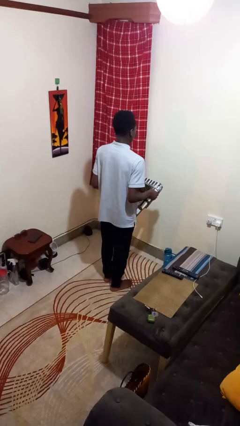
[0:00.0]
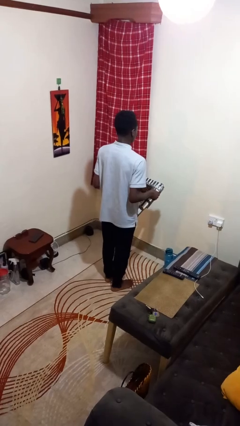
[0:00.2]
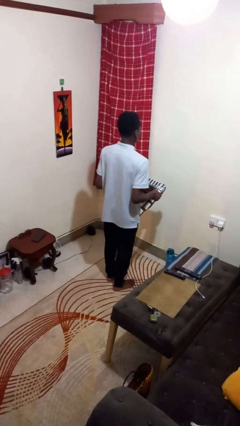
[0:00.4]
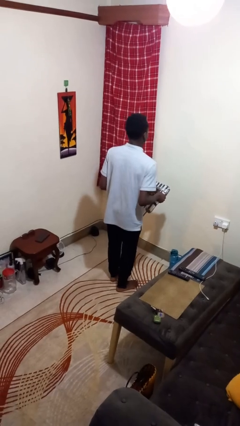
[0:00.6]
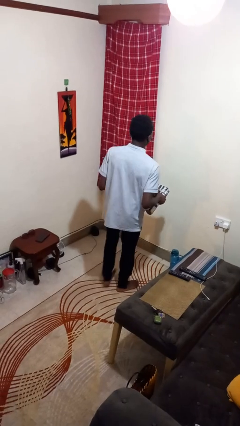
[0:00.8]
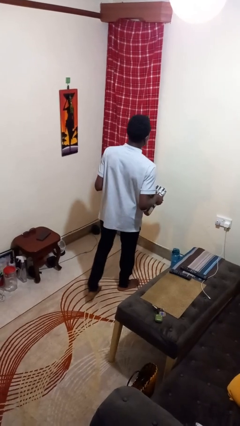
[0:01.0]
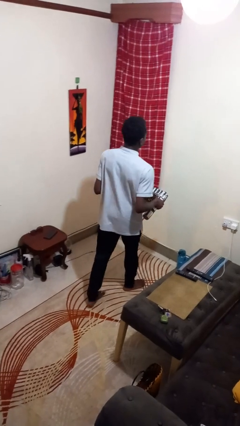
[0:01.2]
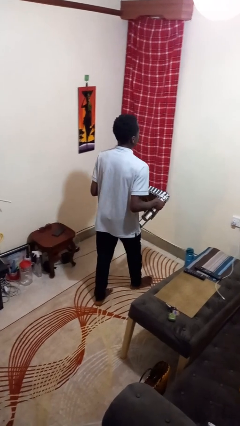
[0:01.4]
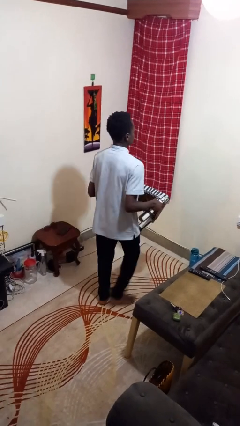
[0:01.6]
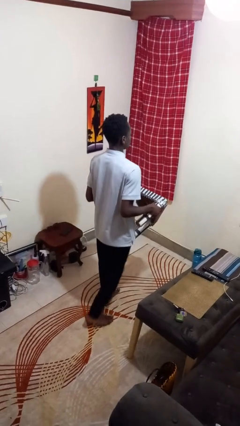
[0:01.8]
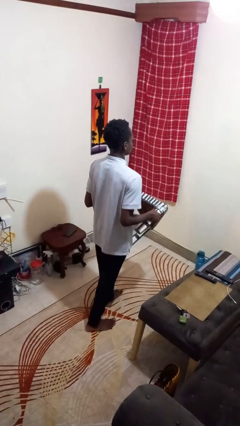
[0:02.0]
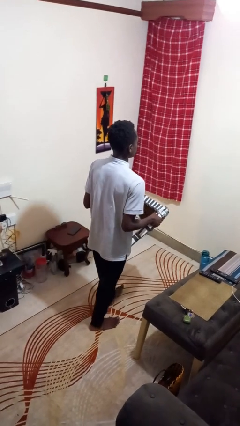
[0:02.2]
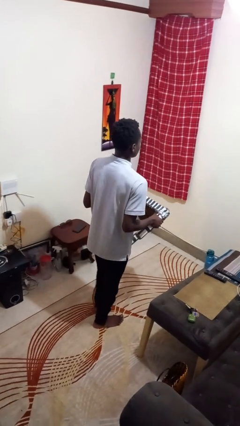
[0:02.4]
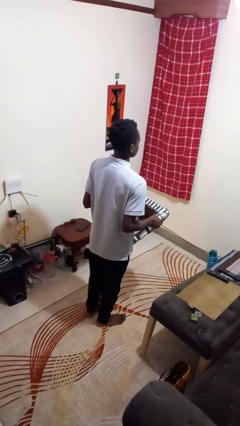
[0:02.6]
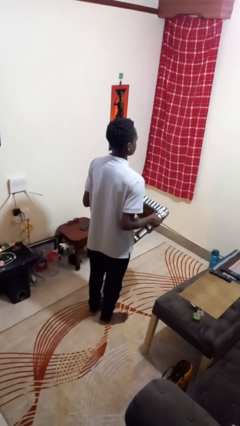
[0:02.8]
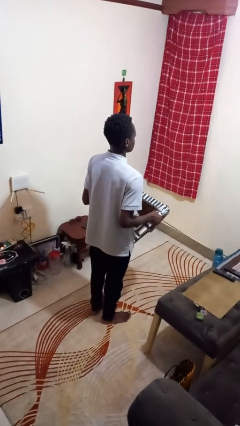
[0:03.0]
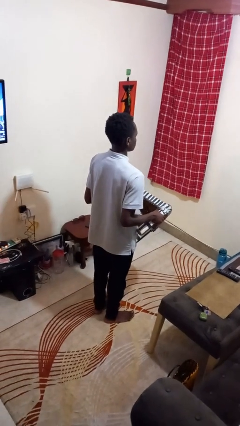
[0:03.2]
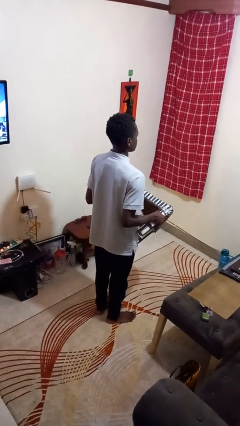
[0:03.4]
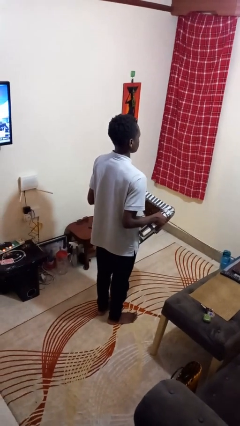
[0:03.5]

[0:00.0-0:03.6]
person carries furniture

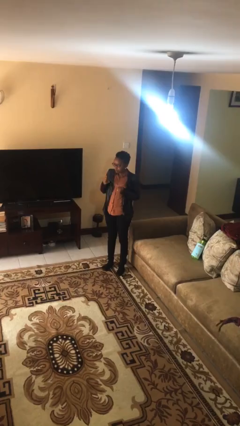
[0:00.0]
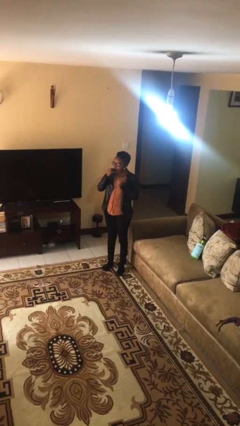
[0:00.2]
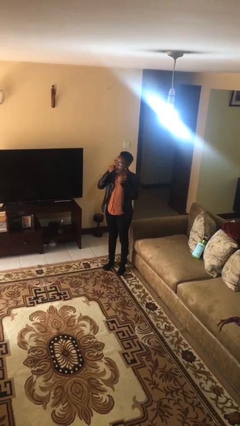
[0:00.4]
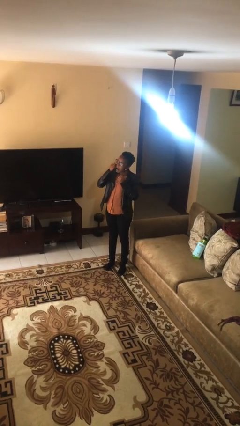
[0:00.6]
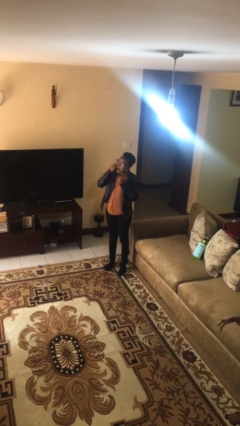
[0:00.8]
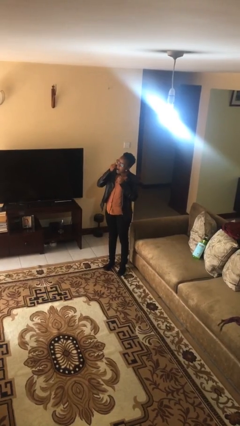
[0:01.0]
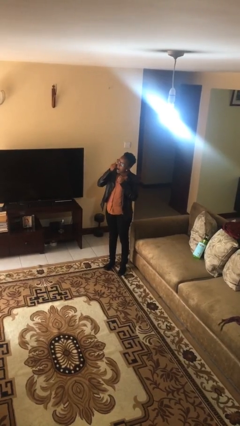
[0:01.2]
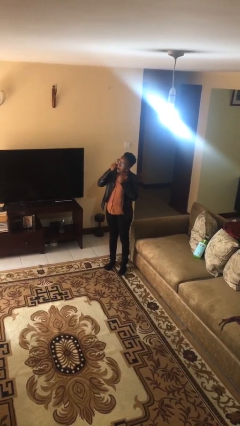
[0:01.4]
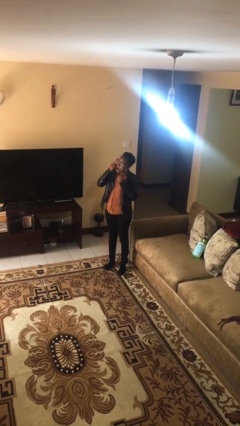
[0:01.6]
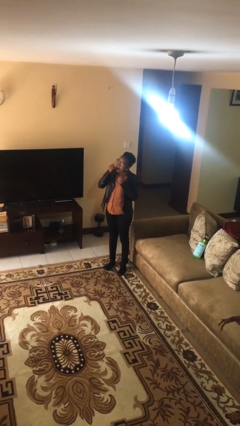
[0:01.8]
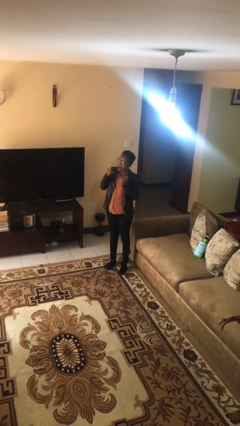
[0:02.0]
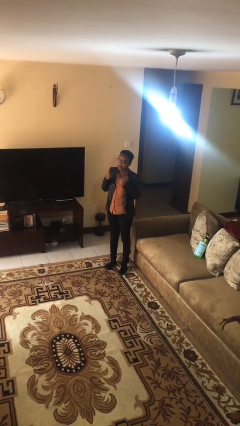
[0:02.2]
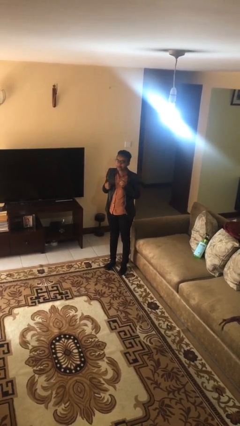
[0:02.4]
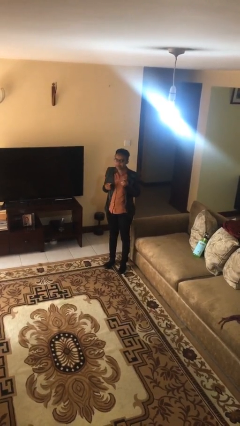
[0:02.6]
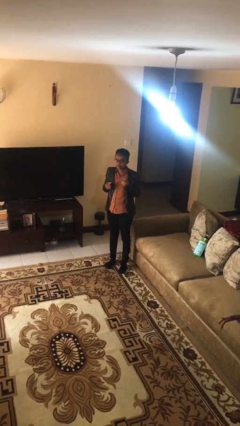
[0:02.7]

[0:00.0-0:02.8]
person flosses

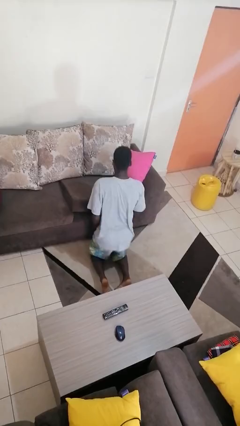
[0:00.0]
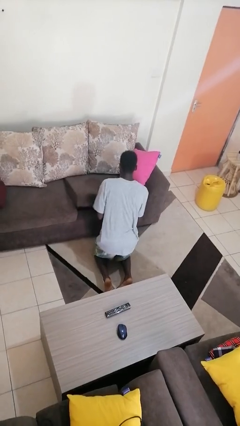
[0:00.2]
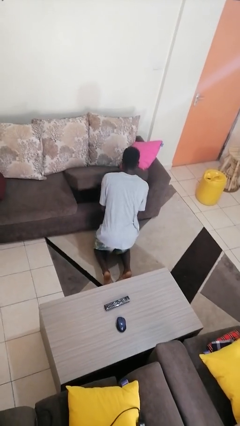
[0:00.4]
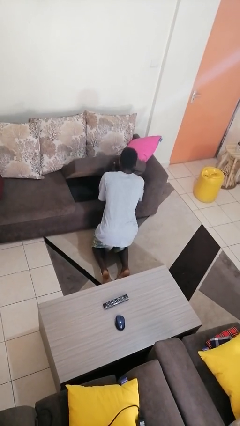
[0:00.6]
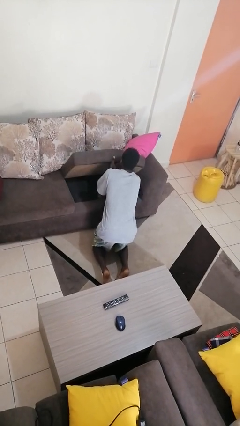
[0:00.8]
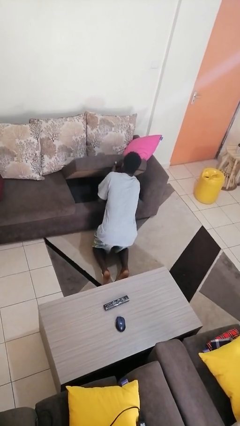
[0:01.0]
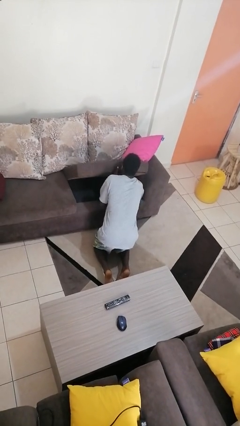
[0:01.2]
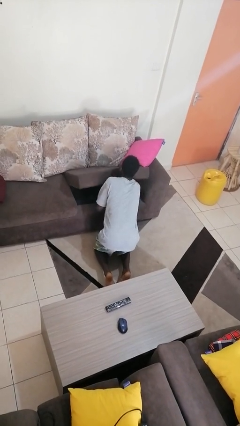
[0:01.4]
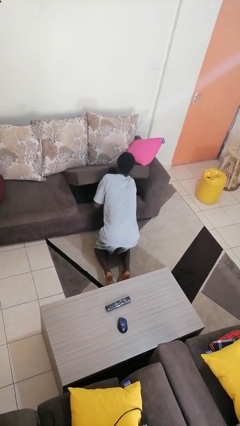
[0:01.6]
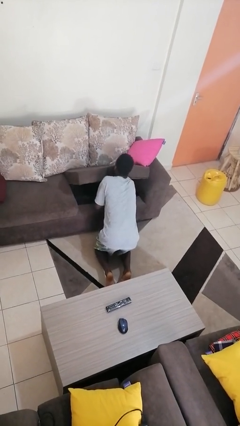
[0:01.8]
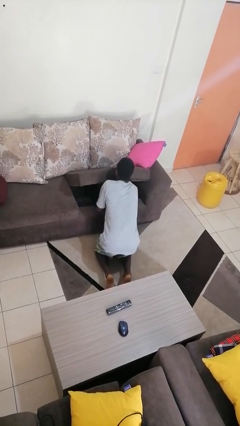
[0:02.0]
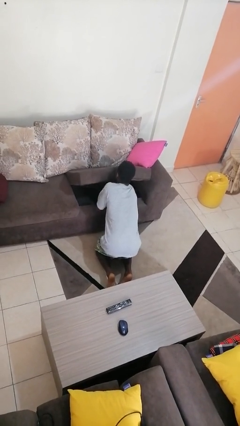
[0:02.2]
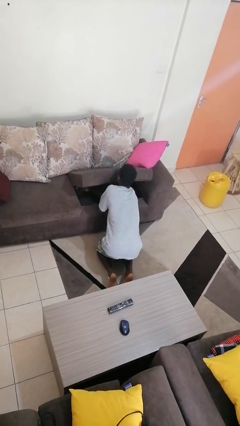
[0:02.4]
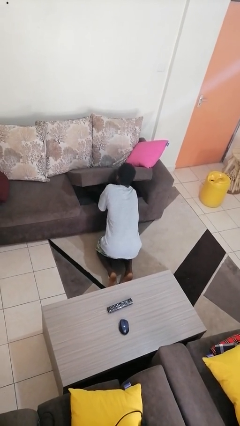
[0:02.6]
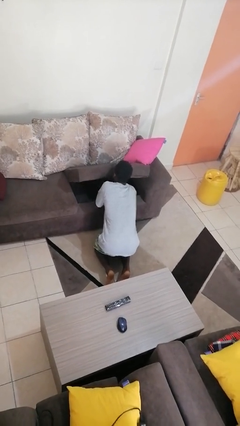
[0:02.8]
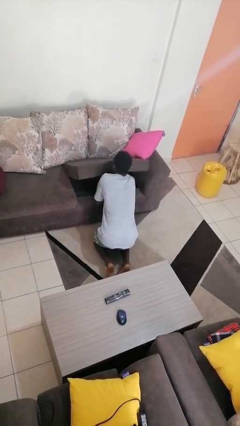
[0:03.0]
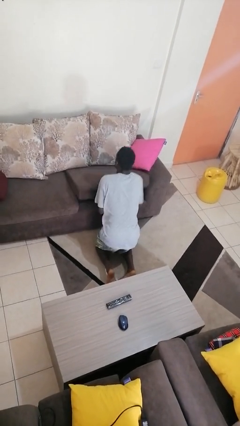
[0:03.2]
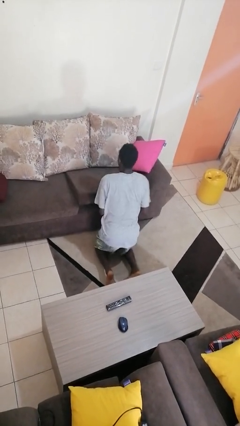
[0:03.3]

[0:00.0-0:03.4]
person searches under couch

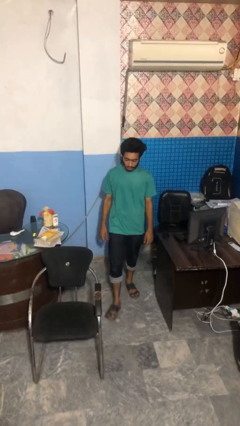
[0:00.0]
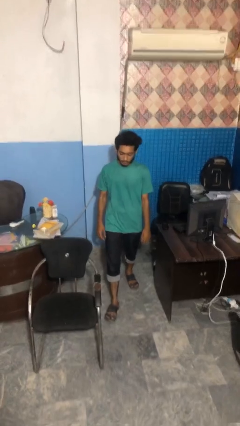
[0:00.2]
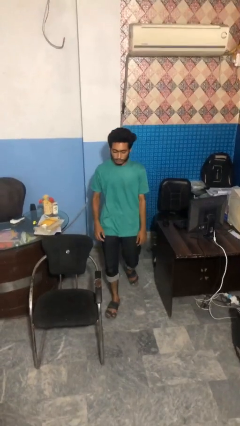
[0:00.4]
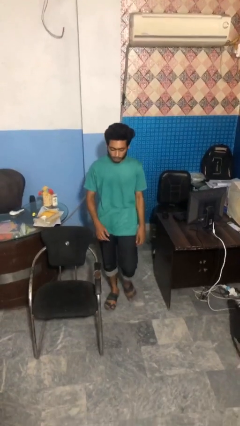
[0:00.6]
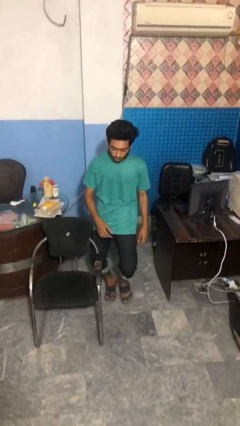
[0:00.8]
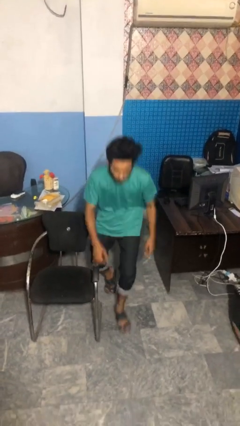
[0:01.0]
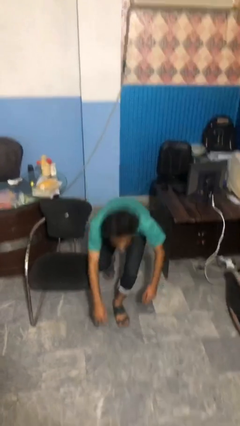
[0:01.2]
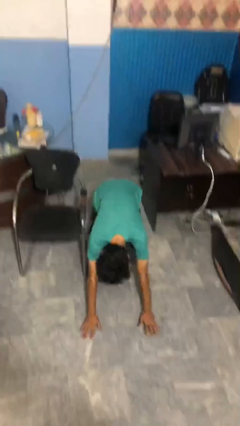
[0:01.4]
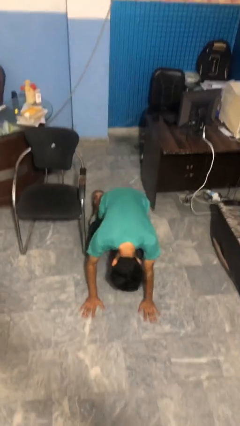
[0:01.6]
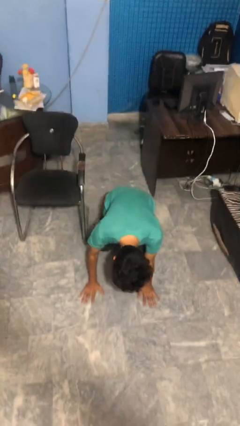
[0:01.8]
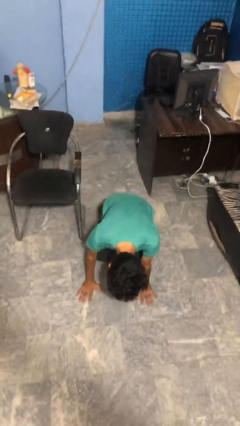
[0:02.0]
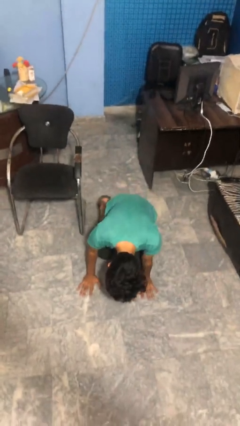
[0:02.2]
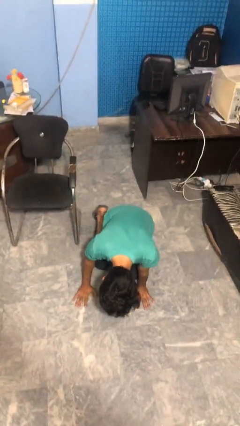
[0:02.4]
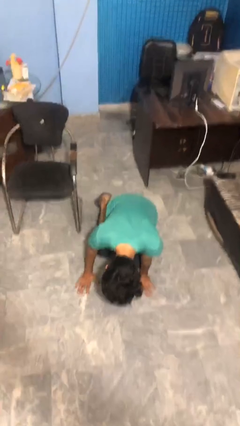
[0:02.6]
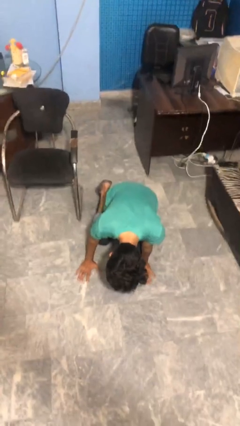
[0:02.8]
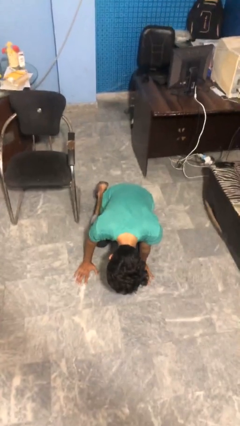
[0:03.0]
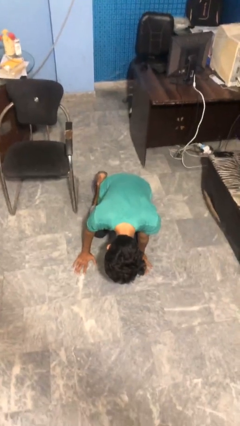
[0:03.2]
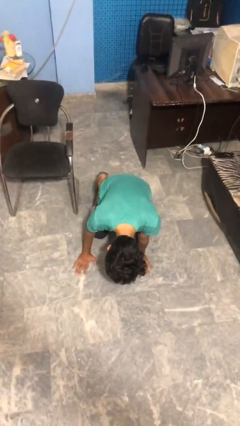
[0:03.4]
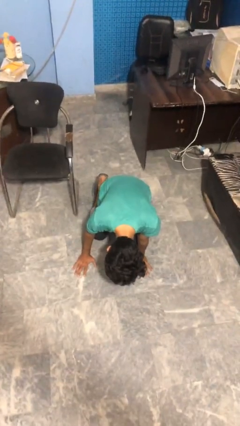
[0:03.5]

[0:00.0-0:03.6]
person trips on object on floor

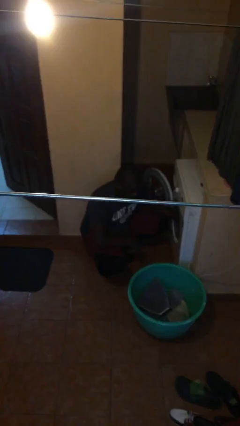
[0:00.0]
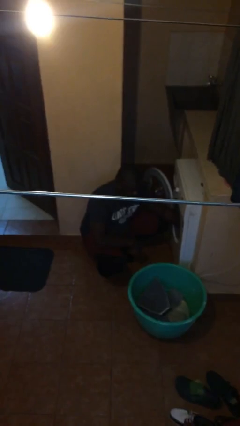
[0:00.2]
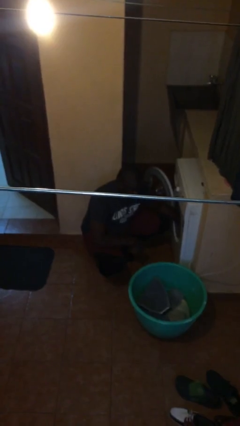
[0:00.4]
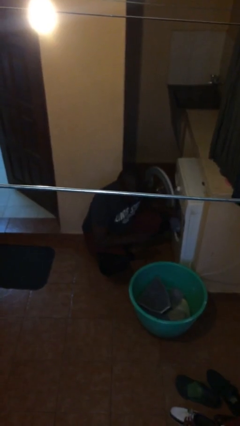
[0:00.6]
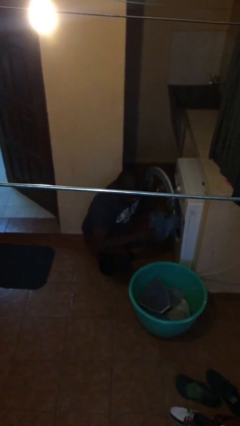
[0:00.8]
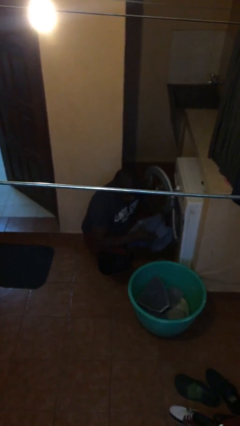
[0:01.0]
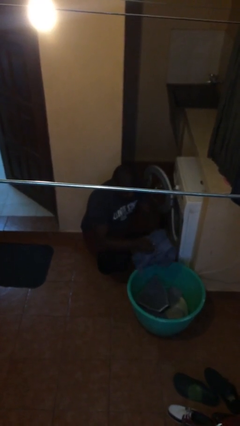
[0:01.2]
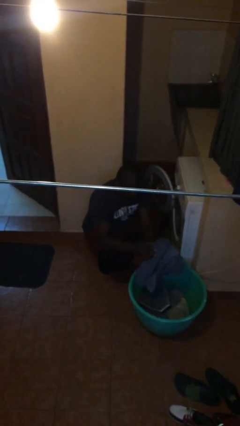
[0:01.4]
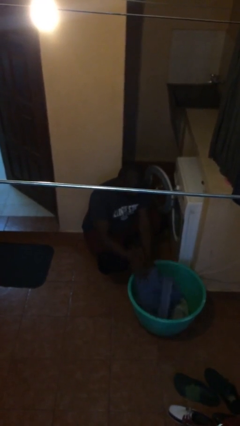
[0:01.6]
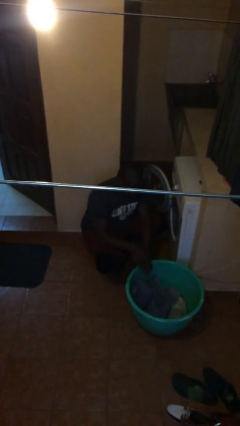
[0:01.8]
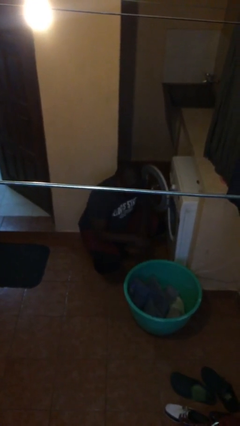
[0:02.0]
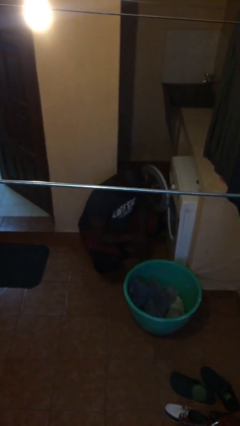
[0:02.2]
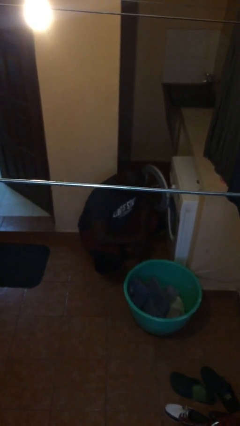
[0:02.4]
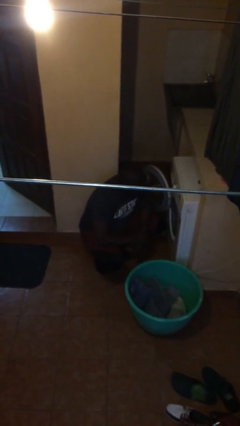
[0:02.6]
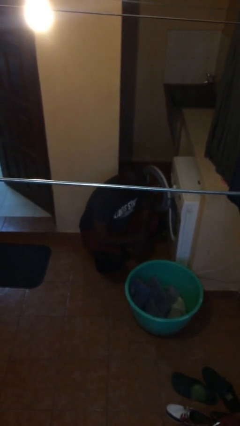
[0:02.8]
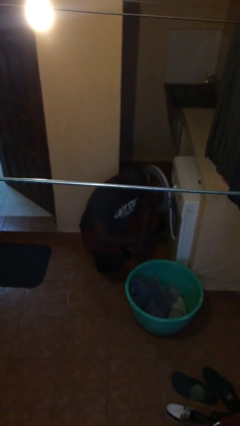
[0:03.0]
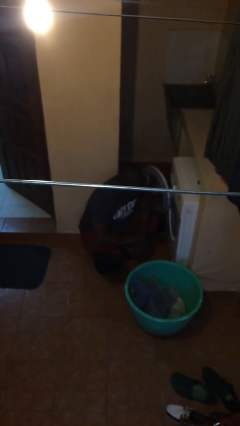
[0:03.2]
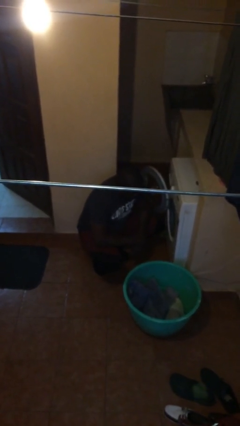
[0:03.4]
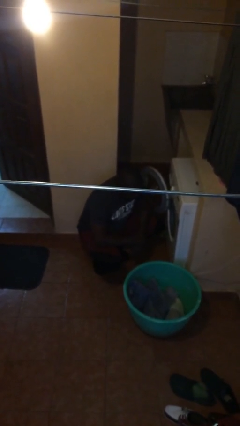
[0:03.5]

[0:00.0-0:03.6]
person unloads dryer

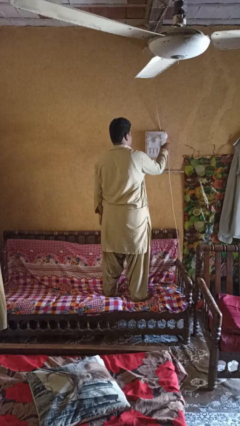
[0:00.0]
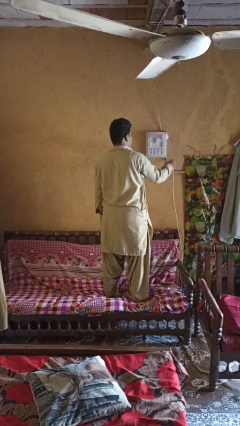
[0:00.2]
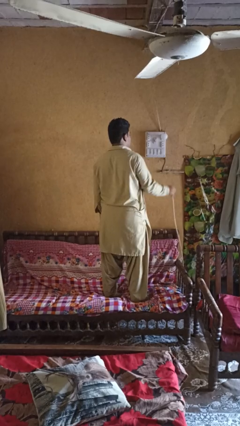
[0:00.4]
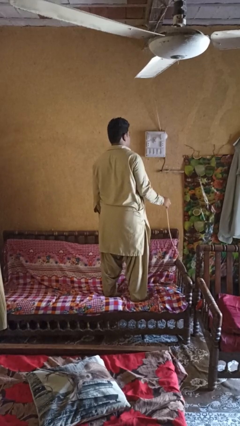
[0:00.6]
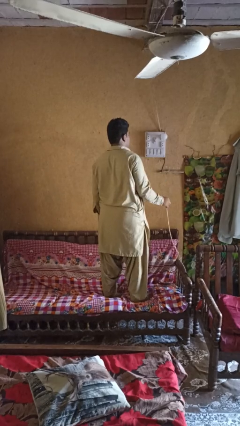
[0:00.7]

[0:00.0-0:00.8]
person unplugs from electrical socket
